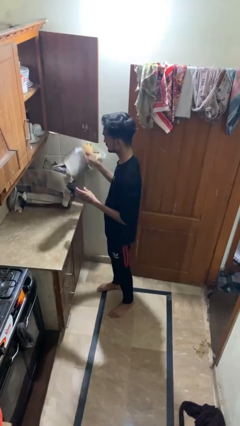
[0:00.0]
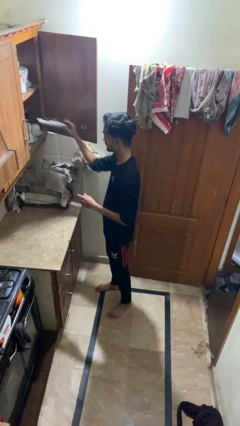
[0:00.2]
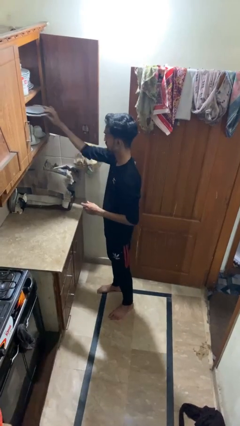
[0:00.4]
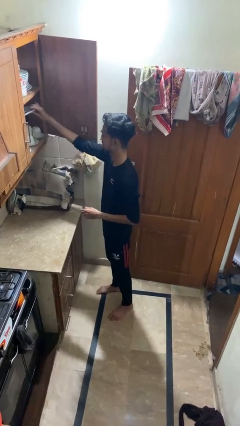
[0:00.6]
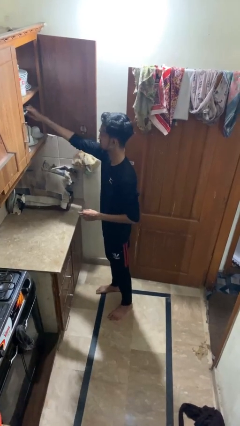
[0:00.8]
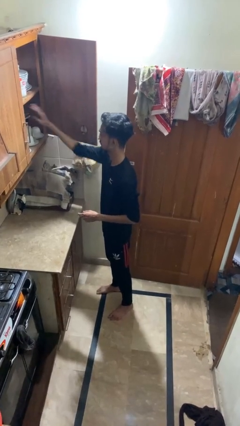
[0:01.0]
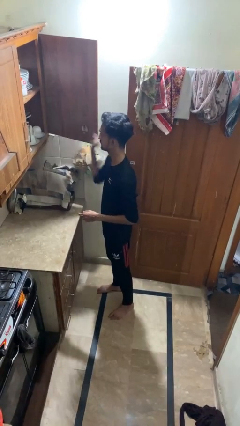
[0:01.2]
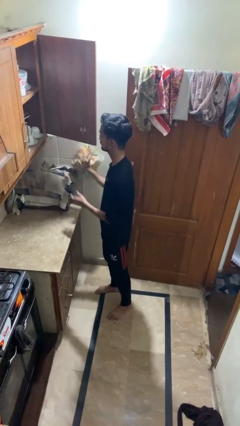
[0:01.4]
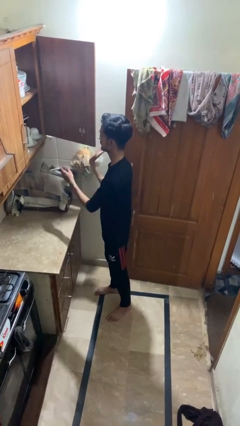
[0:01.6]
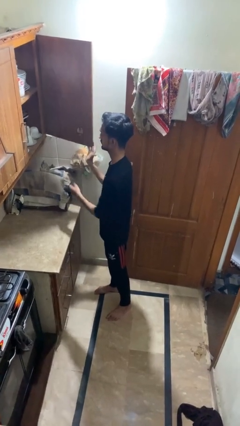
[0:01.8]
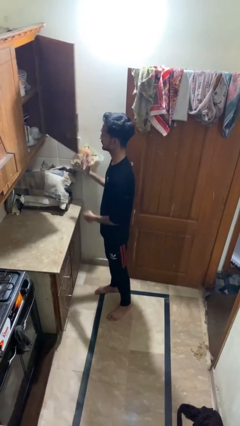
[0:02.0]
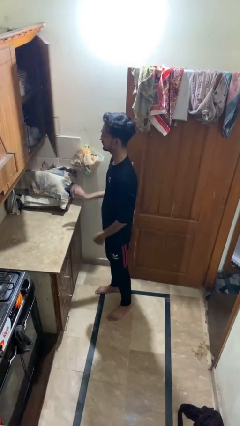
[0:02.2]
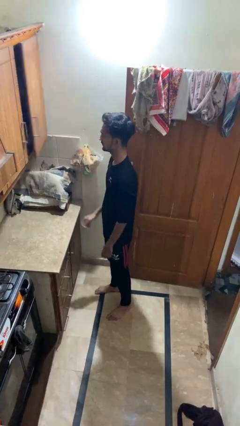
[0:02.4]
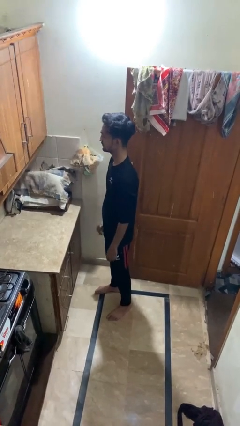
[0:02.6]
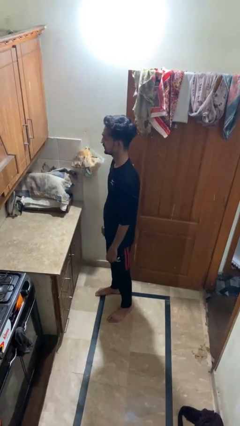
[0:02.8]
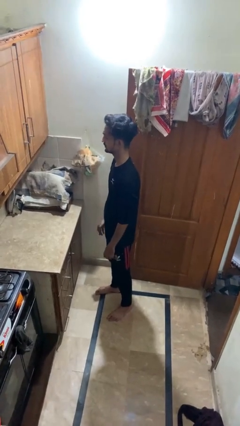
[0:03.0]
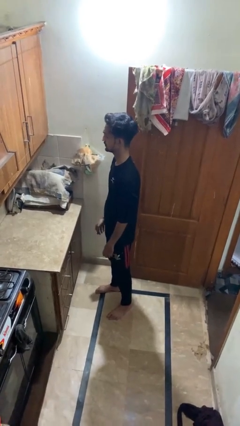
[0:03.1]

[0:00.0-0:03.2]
person takes object from cabinet

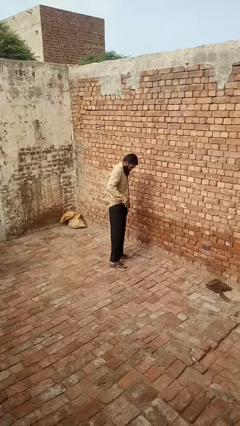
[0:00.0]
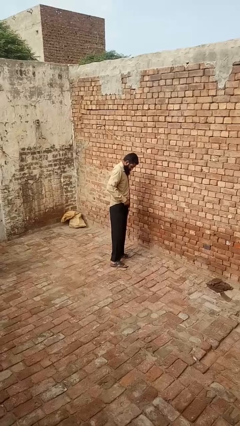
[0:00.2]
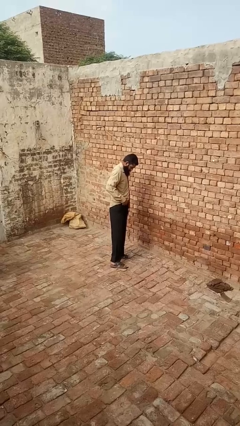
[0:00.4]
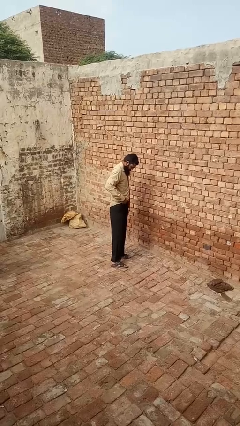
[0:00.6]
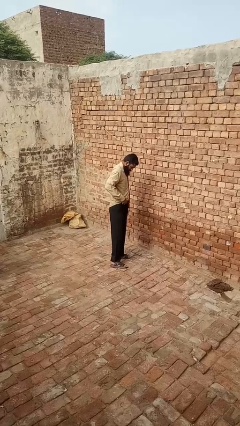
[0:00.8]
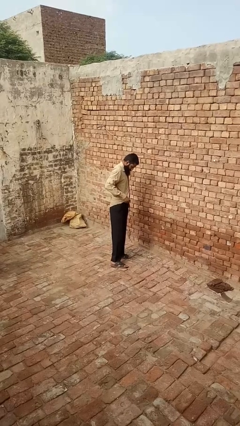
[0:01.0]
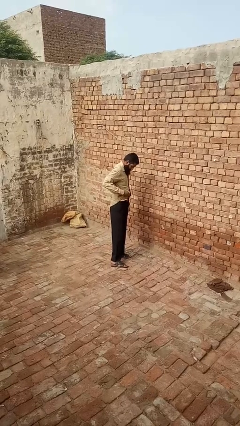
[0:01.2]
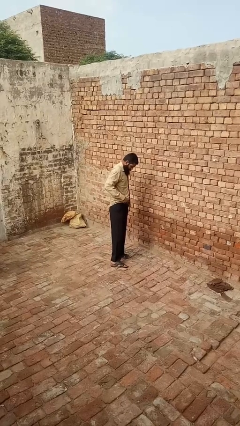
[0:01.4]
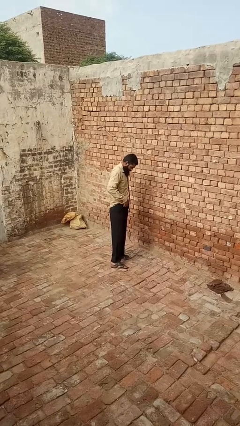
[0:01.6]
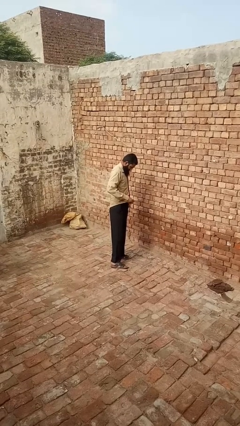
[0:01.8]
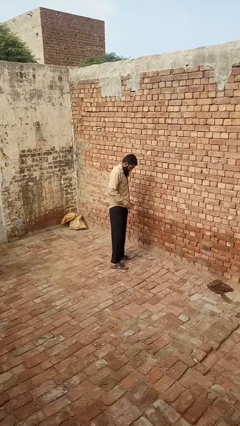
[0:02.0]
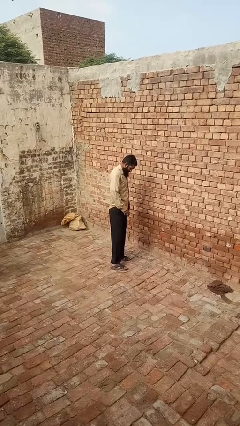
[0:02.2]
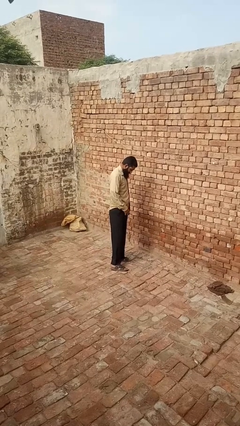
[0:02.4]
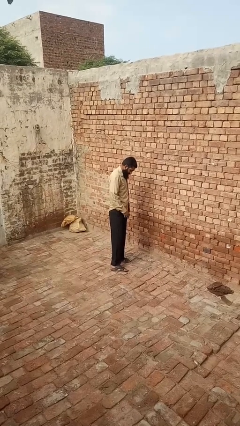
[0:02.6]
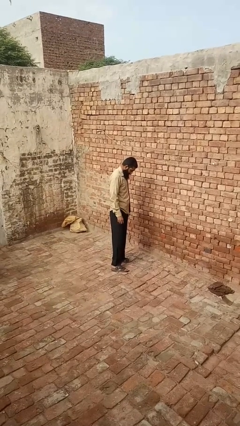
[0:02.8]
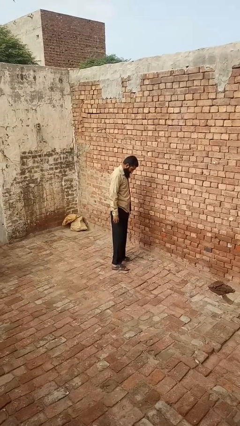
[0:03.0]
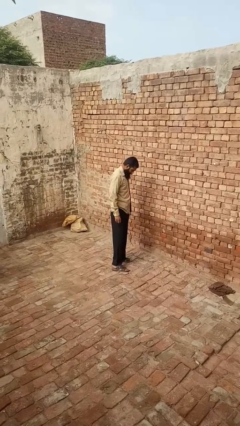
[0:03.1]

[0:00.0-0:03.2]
person untucks shirt

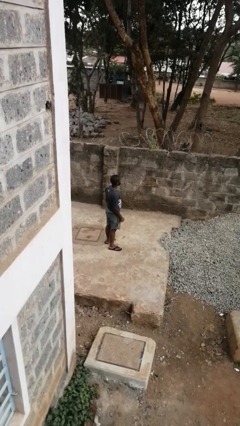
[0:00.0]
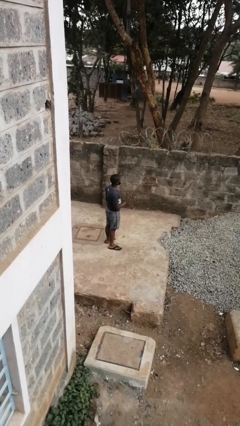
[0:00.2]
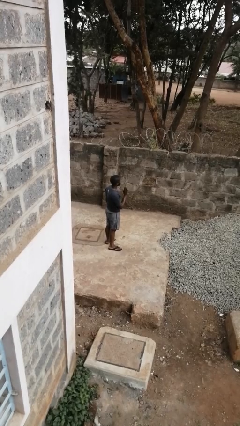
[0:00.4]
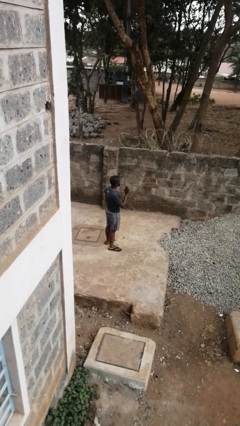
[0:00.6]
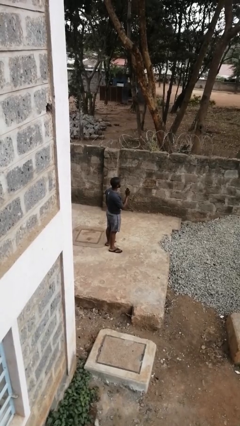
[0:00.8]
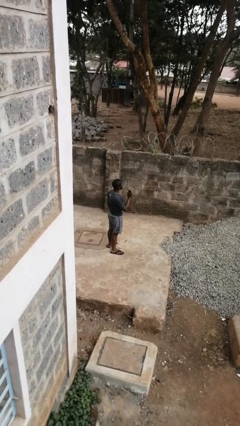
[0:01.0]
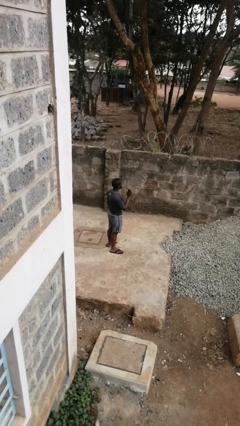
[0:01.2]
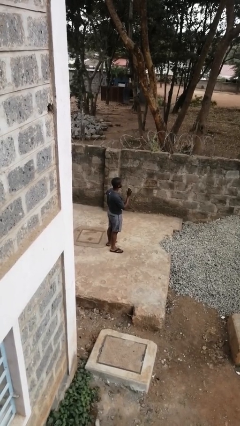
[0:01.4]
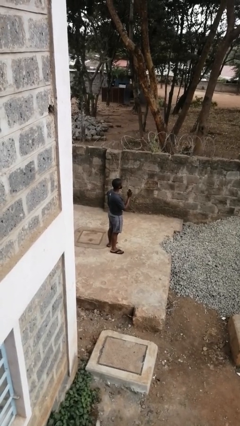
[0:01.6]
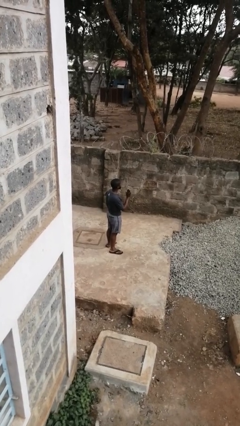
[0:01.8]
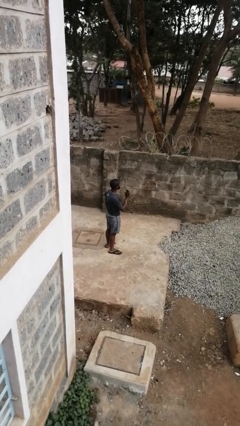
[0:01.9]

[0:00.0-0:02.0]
person gestures stop

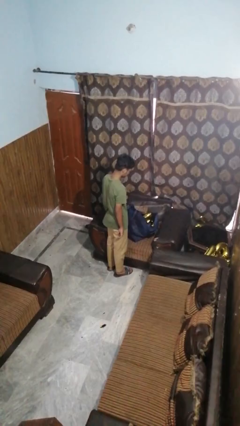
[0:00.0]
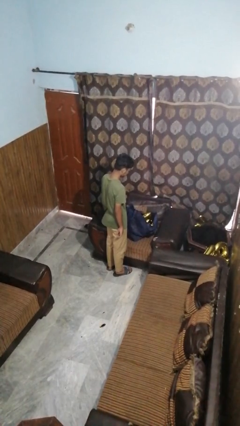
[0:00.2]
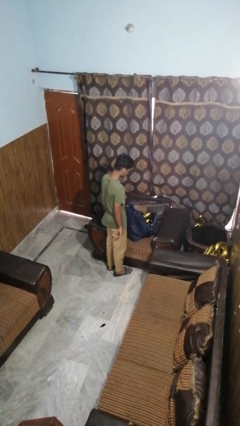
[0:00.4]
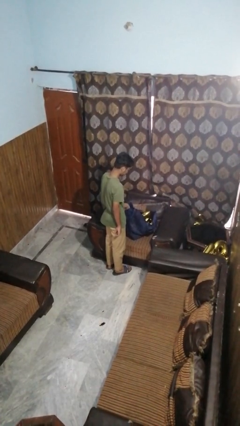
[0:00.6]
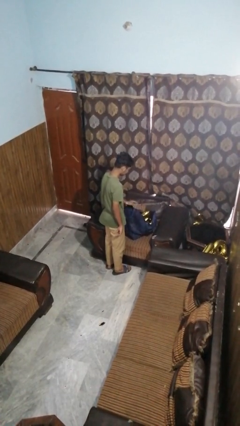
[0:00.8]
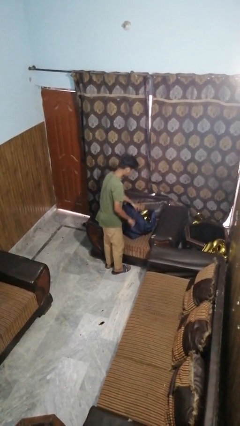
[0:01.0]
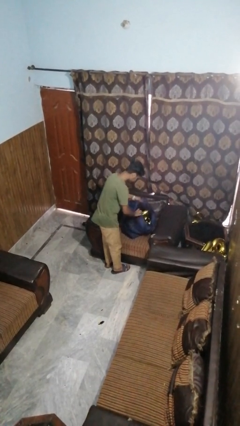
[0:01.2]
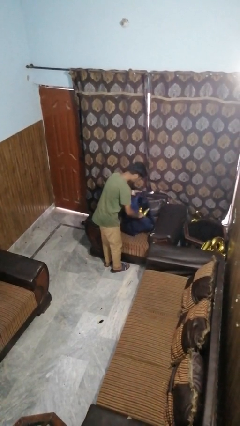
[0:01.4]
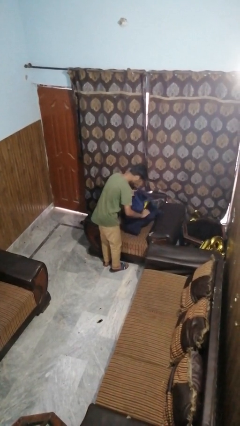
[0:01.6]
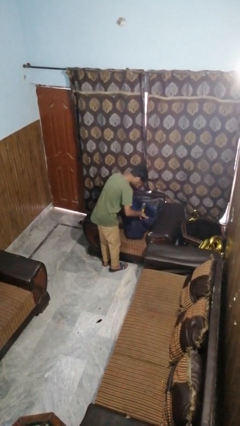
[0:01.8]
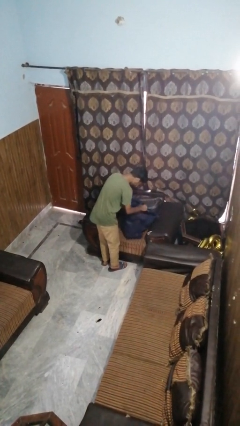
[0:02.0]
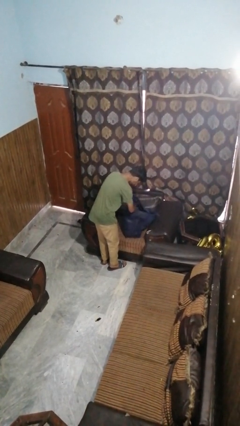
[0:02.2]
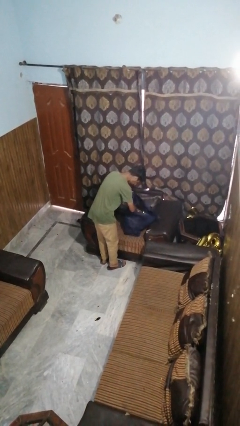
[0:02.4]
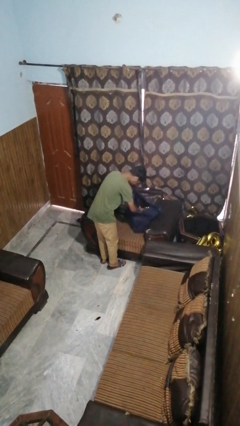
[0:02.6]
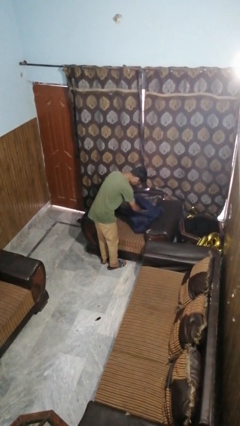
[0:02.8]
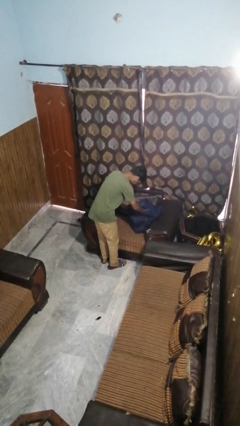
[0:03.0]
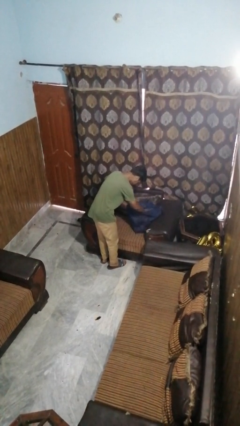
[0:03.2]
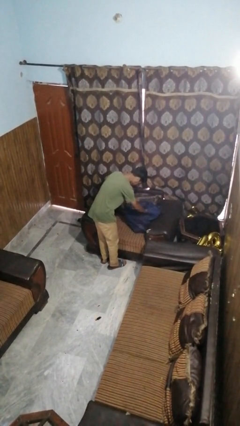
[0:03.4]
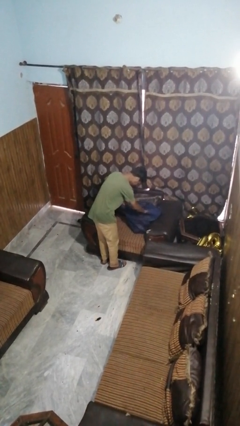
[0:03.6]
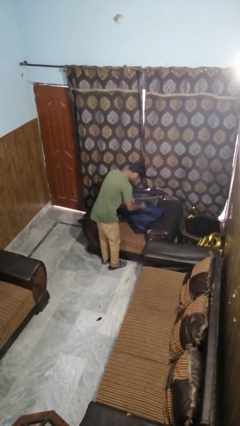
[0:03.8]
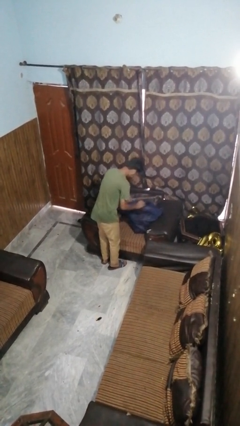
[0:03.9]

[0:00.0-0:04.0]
person searches in bag

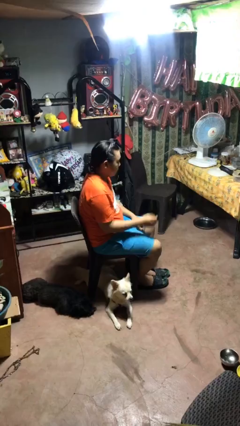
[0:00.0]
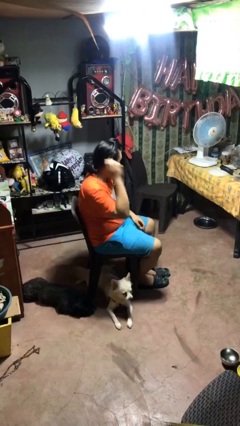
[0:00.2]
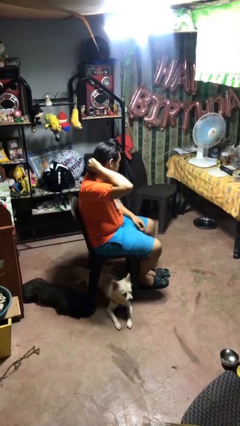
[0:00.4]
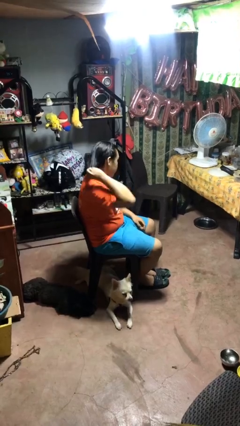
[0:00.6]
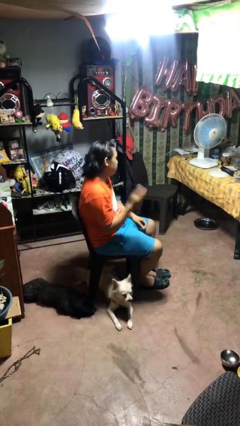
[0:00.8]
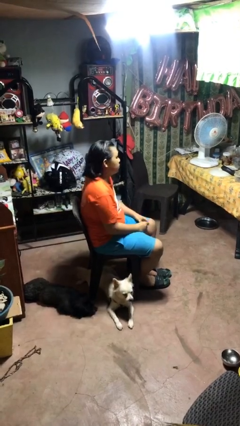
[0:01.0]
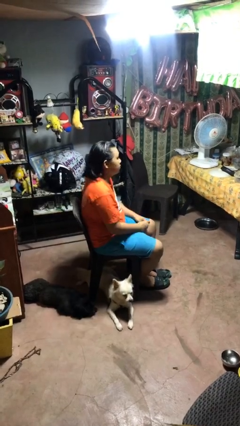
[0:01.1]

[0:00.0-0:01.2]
person takes off hairtie

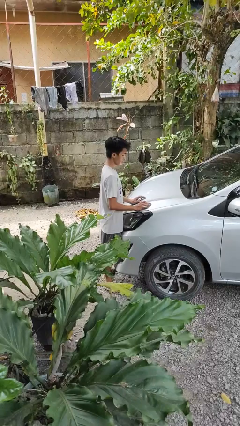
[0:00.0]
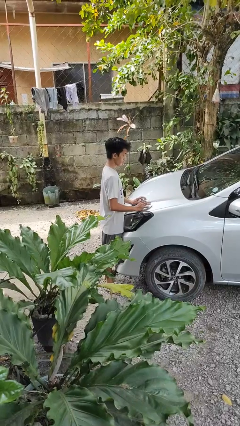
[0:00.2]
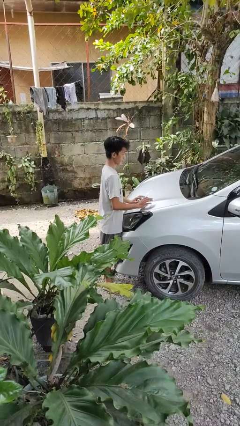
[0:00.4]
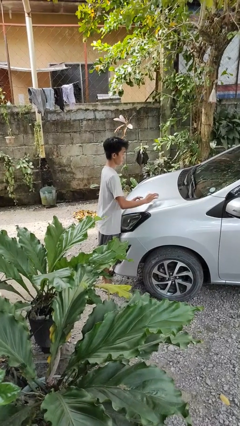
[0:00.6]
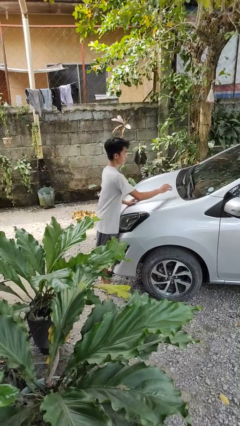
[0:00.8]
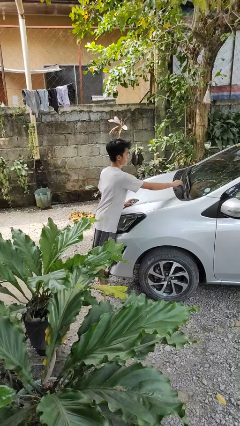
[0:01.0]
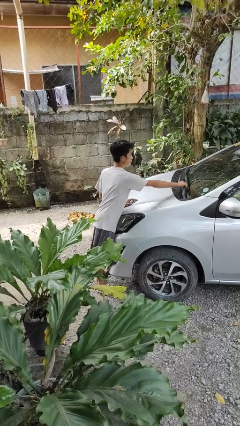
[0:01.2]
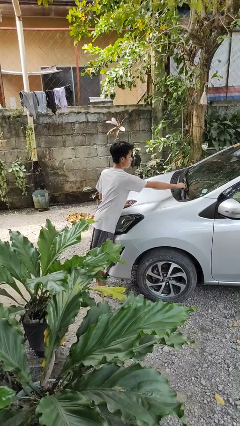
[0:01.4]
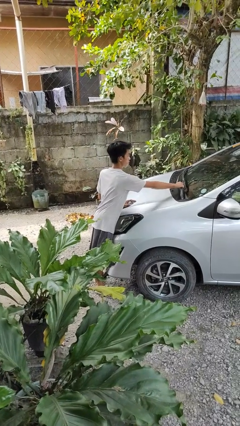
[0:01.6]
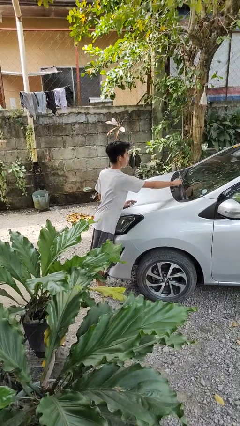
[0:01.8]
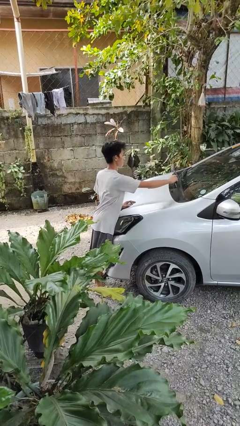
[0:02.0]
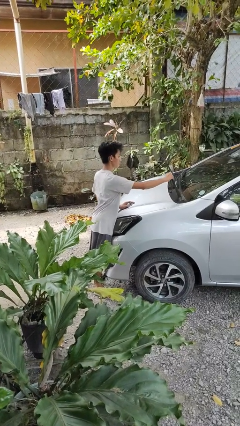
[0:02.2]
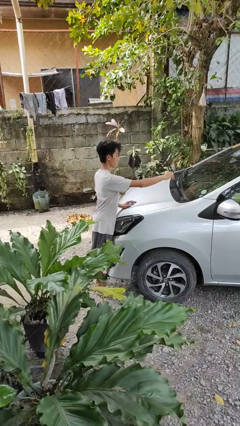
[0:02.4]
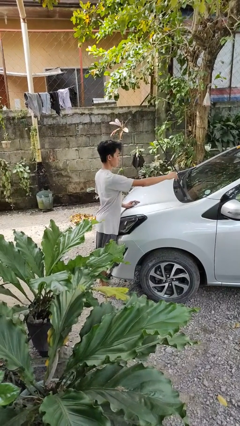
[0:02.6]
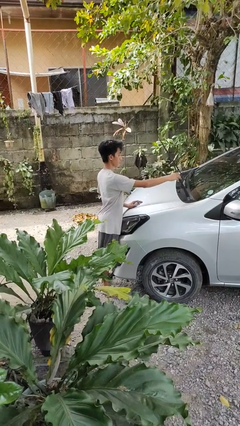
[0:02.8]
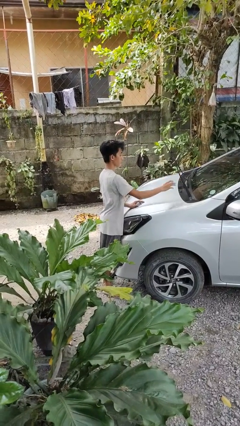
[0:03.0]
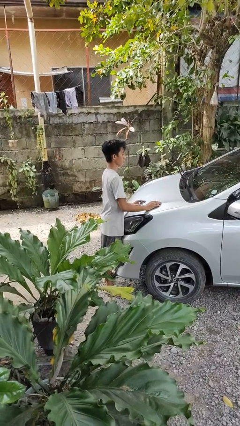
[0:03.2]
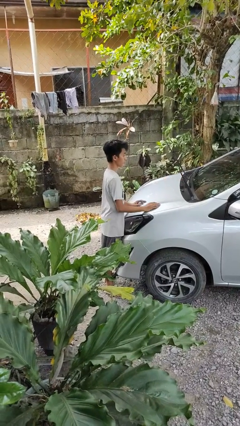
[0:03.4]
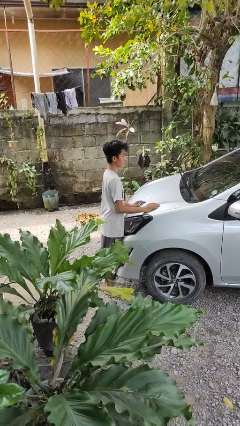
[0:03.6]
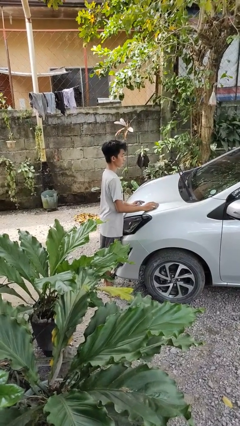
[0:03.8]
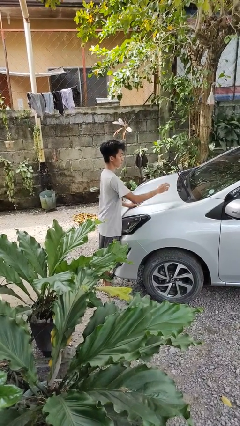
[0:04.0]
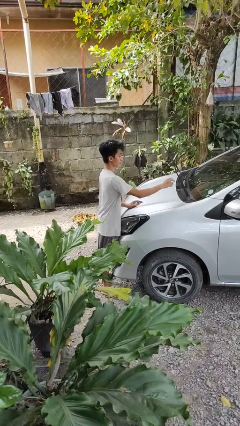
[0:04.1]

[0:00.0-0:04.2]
person flips up car wipers
